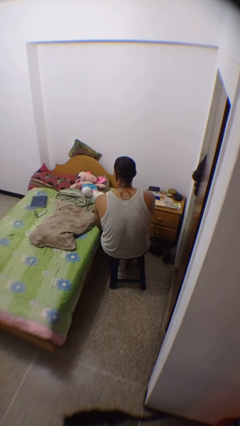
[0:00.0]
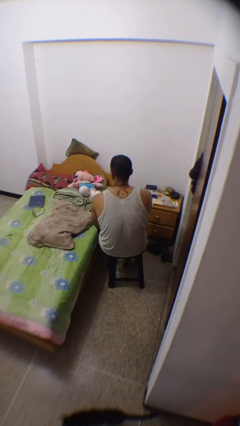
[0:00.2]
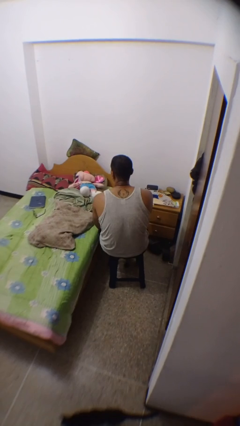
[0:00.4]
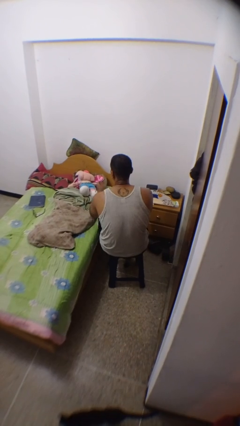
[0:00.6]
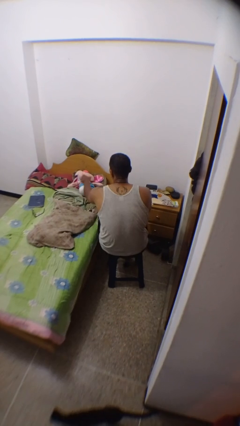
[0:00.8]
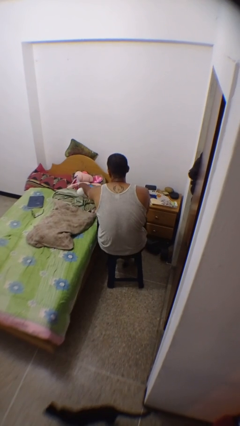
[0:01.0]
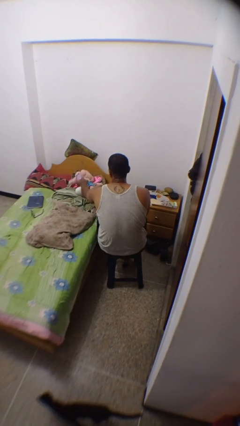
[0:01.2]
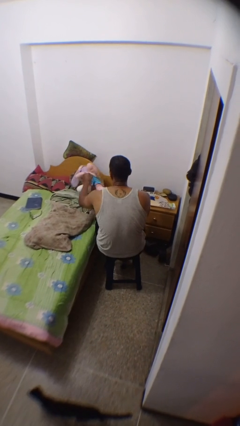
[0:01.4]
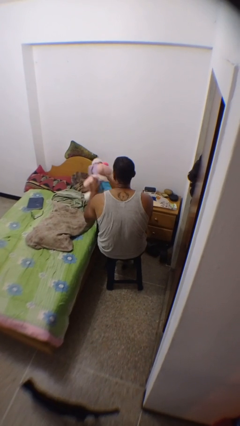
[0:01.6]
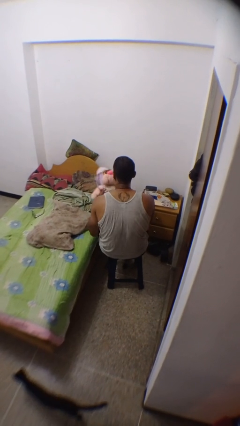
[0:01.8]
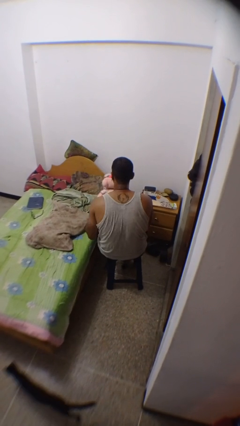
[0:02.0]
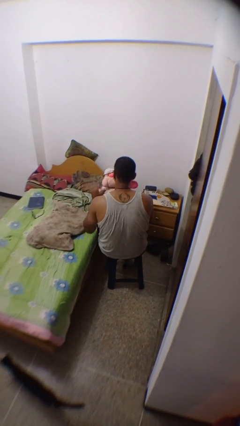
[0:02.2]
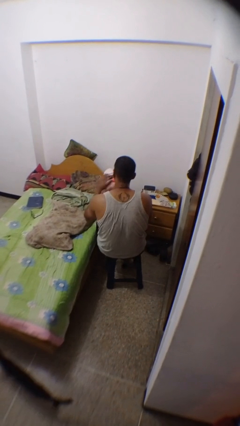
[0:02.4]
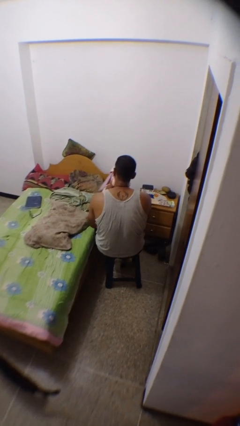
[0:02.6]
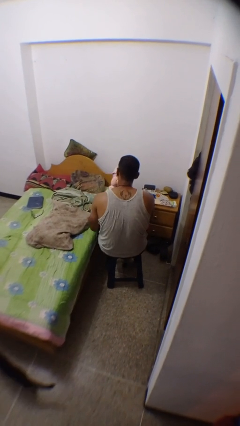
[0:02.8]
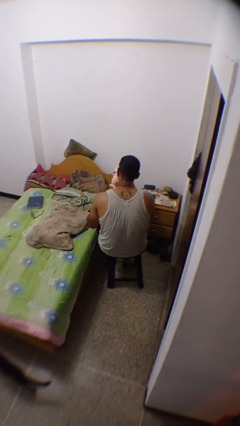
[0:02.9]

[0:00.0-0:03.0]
person picks up object from bed

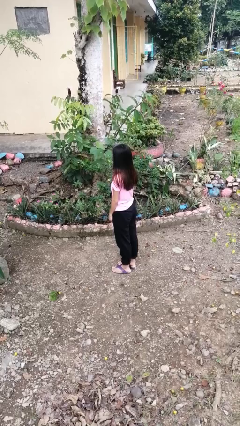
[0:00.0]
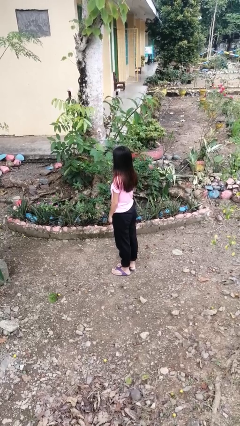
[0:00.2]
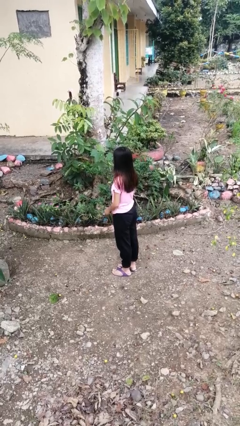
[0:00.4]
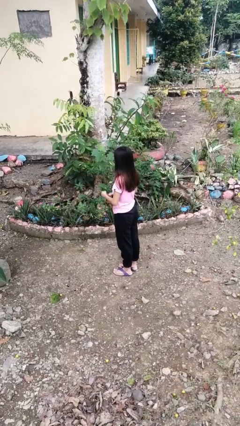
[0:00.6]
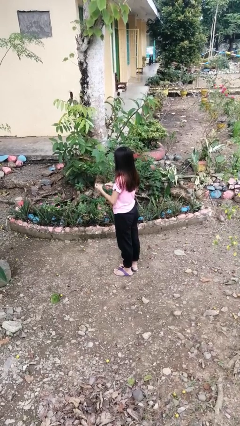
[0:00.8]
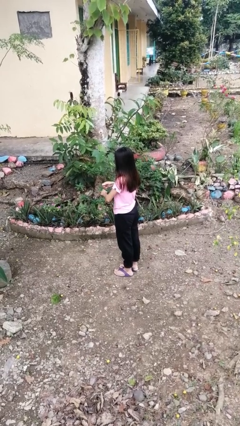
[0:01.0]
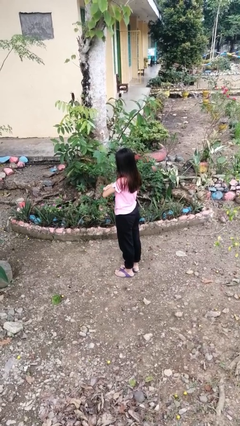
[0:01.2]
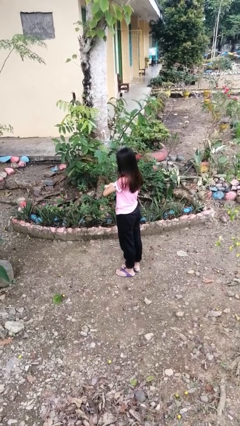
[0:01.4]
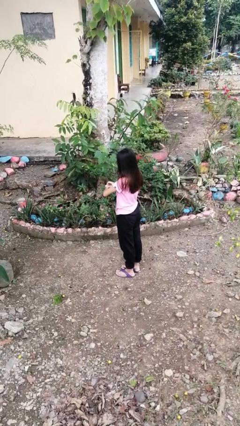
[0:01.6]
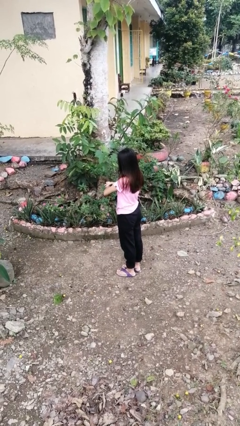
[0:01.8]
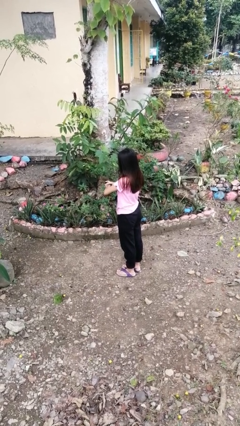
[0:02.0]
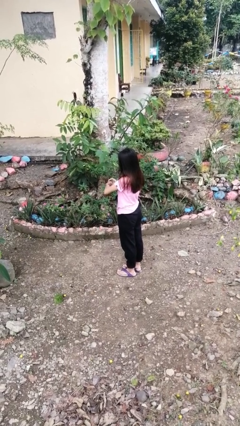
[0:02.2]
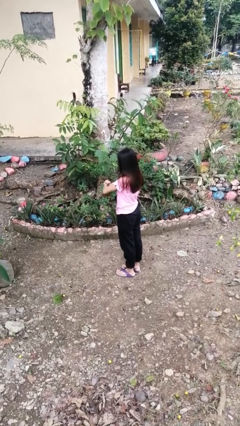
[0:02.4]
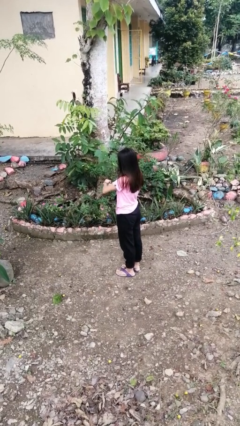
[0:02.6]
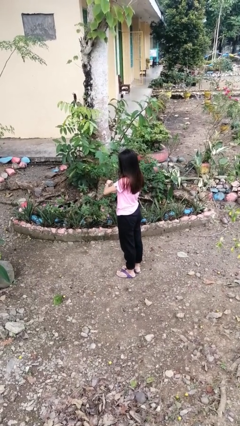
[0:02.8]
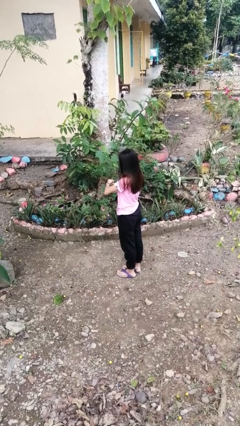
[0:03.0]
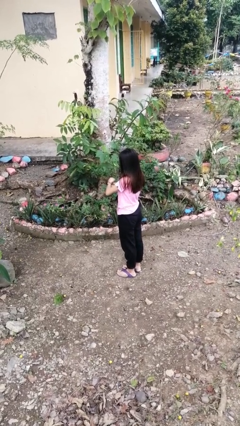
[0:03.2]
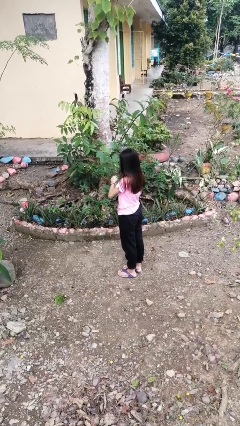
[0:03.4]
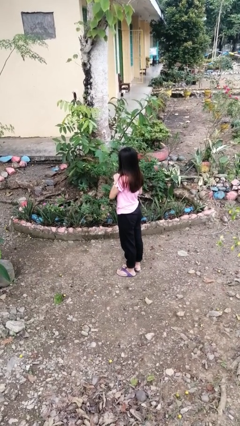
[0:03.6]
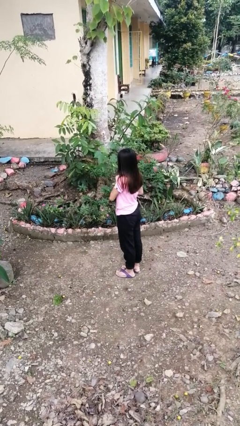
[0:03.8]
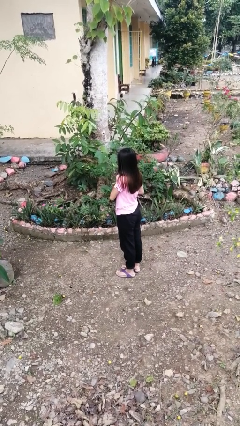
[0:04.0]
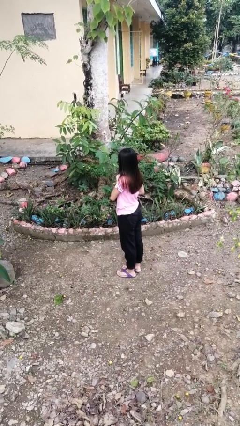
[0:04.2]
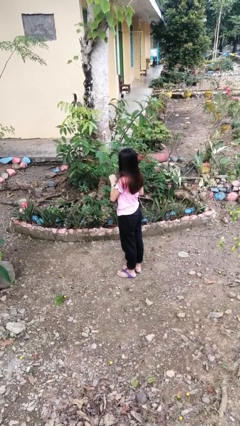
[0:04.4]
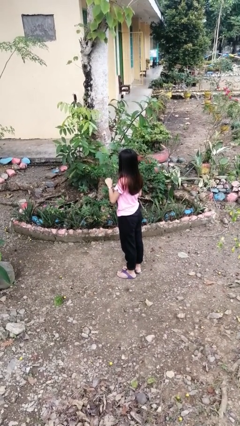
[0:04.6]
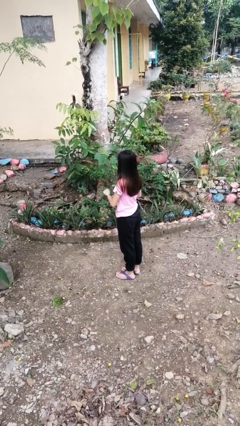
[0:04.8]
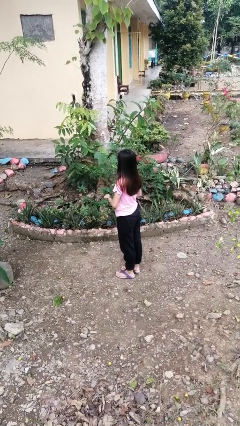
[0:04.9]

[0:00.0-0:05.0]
person puts on wristwatch

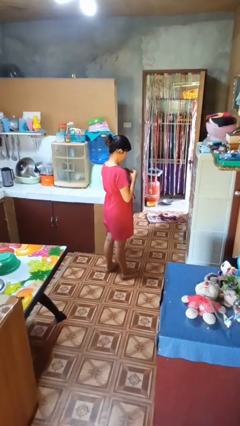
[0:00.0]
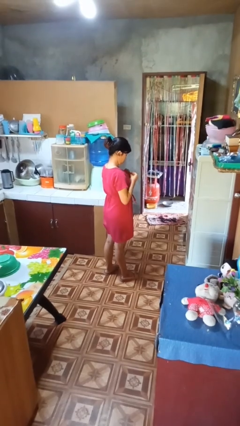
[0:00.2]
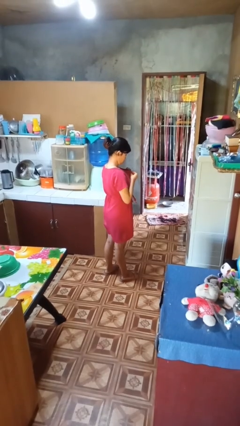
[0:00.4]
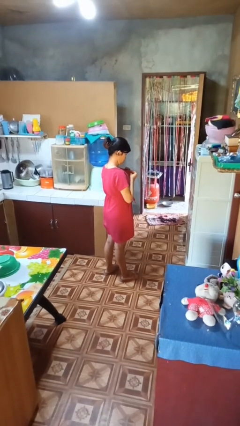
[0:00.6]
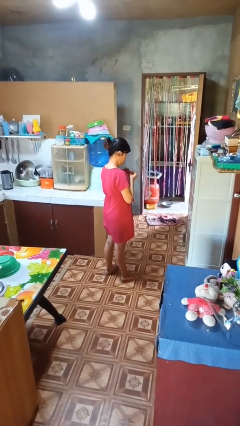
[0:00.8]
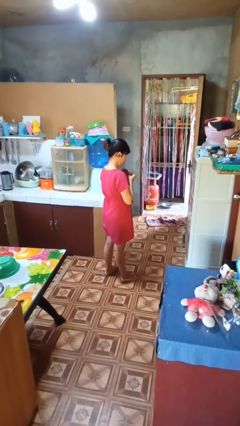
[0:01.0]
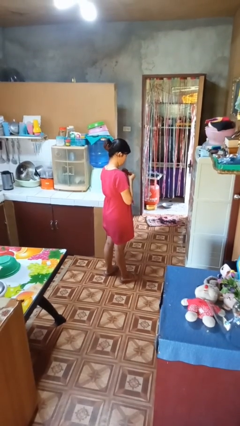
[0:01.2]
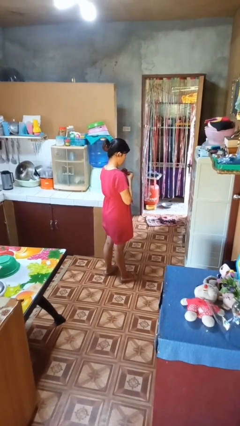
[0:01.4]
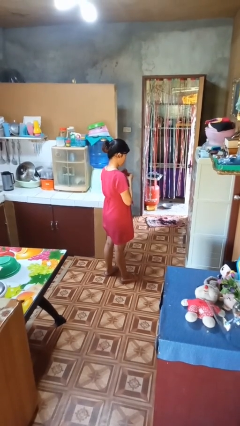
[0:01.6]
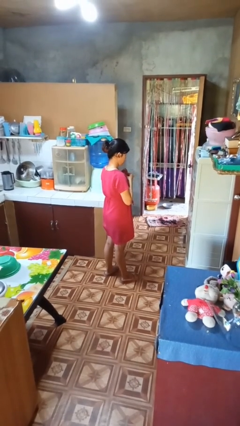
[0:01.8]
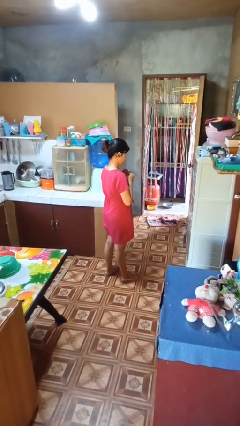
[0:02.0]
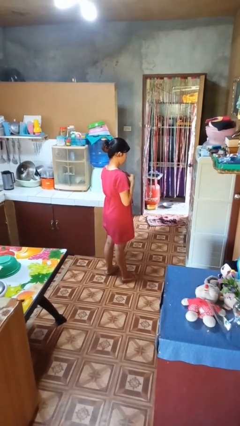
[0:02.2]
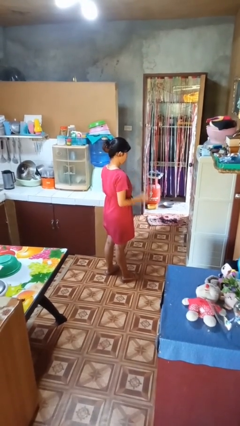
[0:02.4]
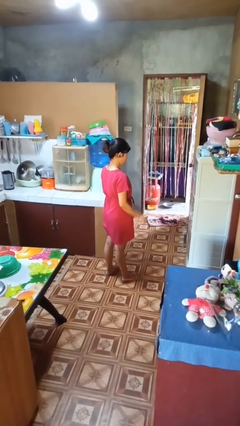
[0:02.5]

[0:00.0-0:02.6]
person buttons shirt

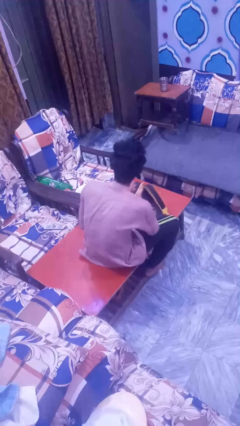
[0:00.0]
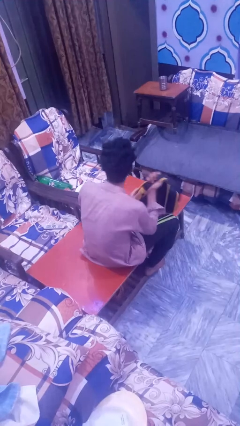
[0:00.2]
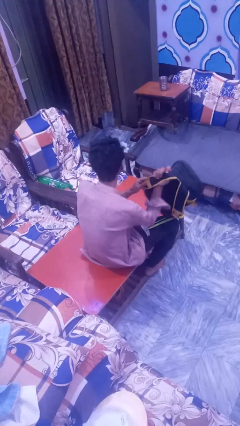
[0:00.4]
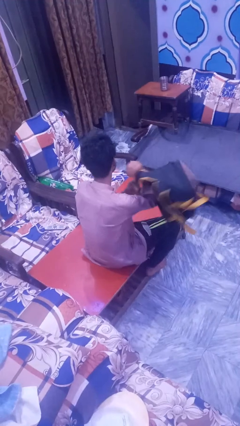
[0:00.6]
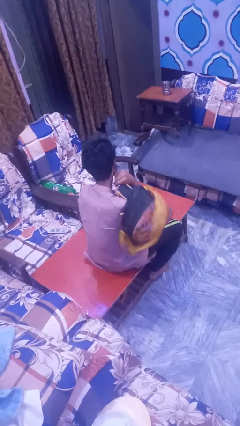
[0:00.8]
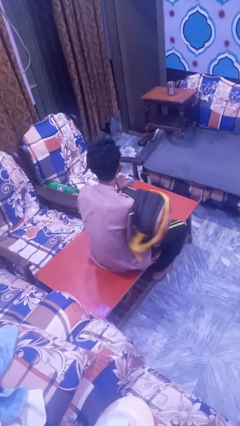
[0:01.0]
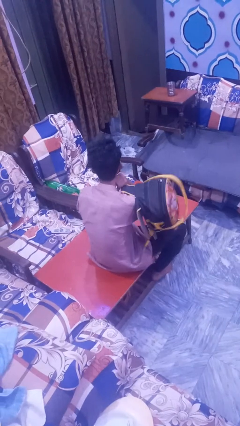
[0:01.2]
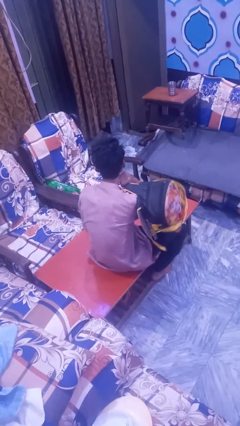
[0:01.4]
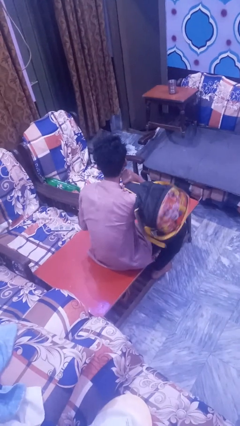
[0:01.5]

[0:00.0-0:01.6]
person puts on backpack

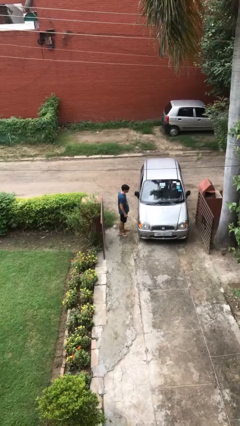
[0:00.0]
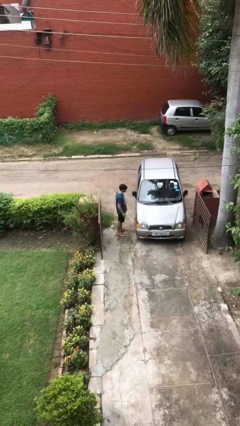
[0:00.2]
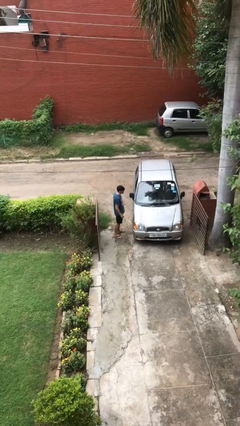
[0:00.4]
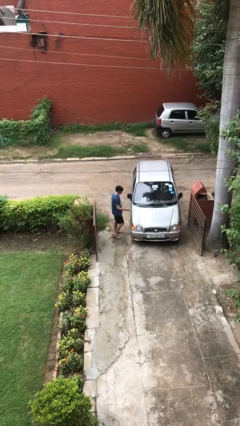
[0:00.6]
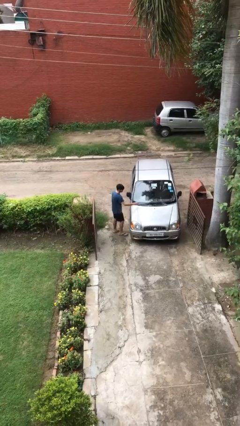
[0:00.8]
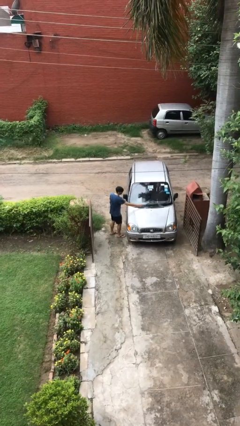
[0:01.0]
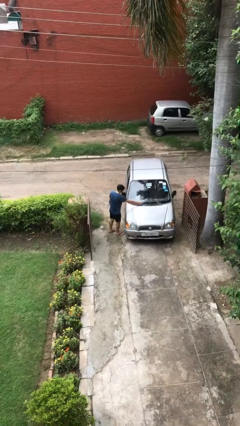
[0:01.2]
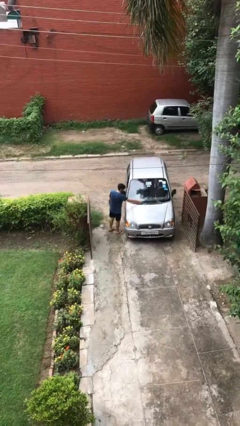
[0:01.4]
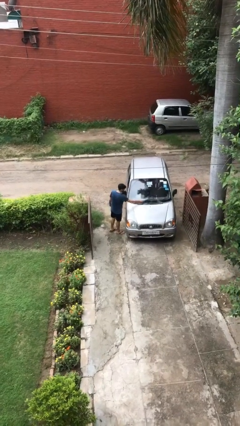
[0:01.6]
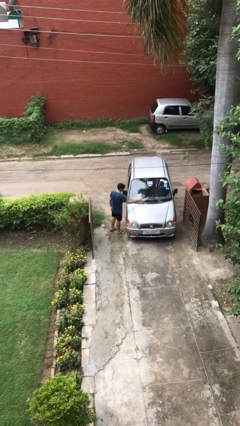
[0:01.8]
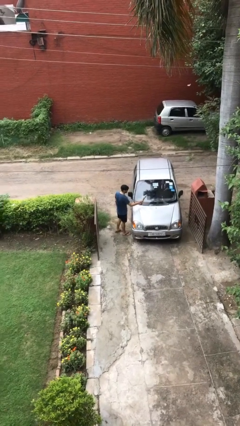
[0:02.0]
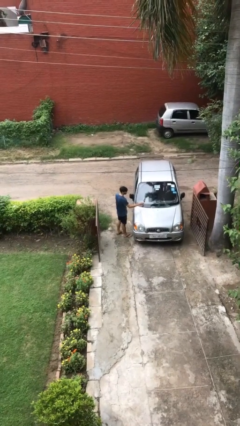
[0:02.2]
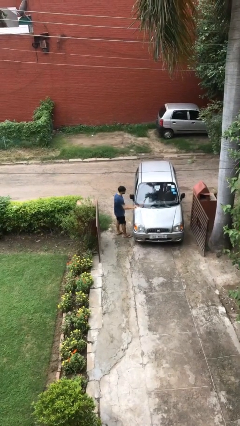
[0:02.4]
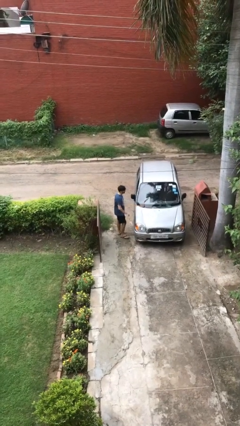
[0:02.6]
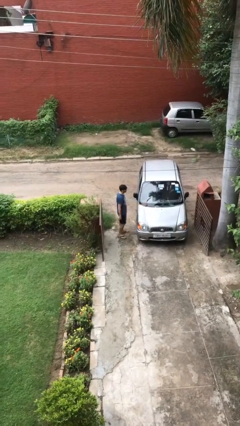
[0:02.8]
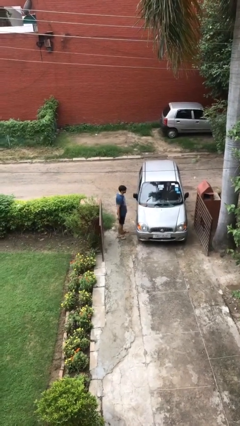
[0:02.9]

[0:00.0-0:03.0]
person flips up car wipers

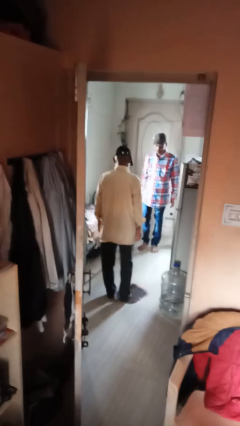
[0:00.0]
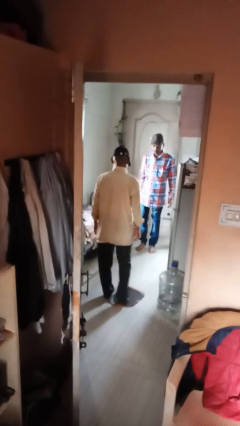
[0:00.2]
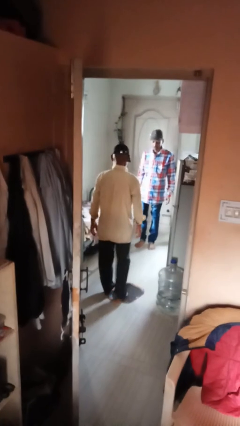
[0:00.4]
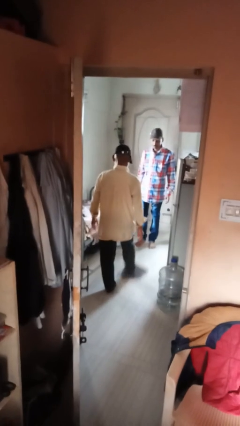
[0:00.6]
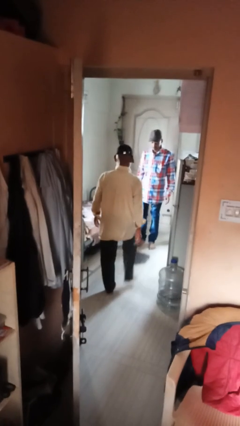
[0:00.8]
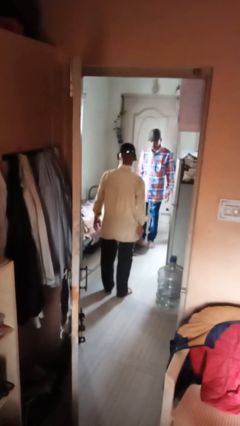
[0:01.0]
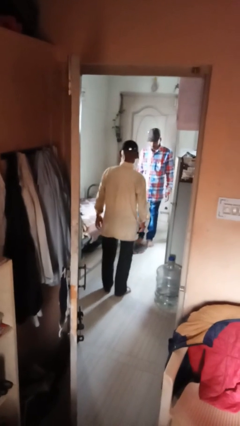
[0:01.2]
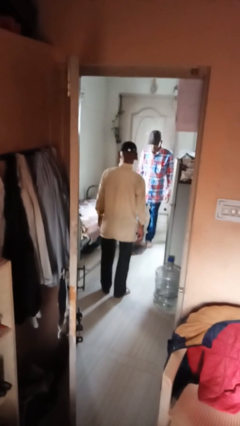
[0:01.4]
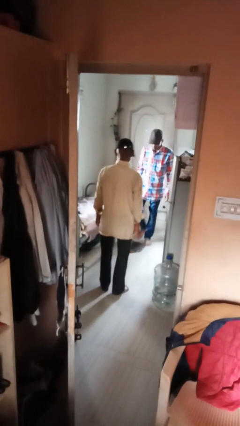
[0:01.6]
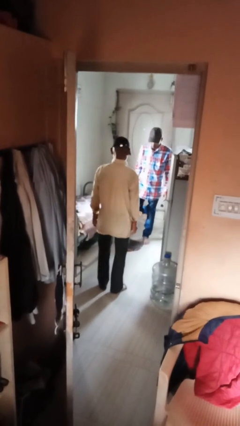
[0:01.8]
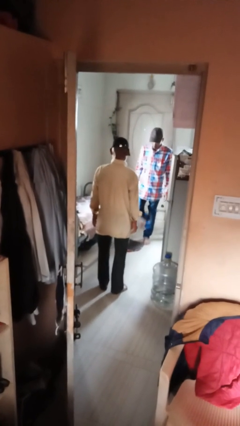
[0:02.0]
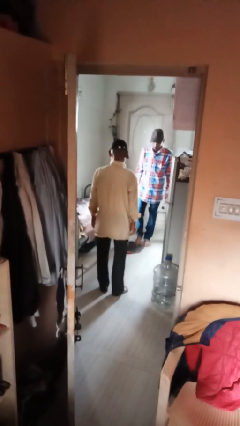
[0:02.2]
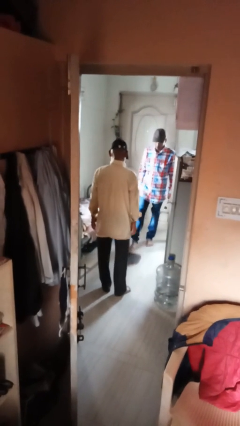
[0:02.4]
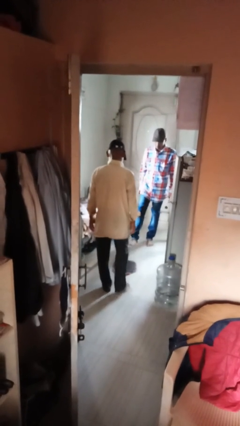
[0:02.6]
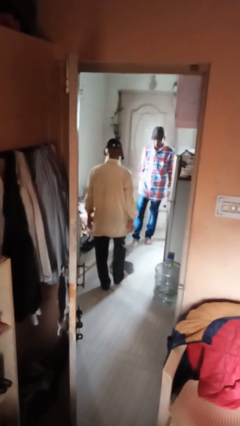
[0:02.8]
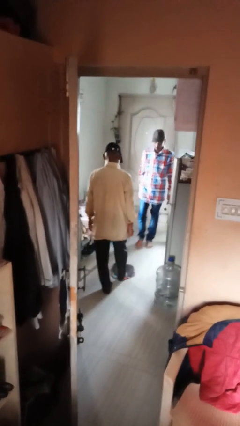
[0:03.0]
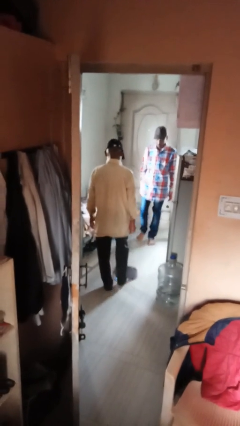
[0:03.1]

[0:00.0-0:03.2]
person kicks object to person
